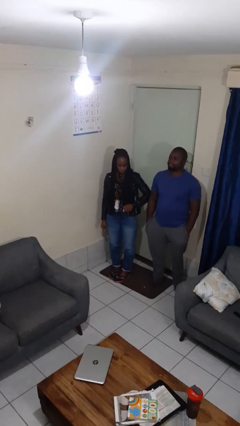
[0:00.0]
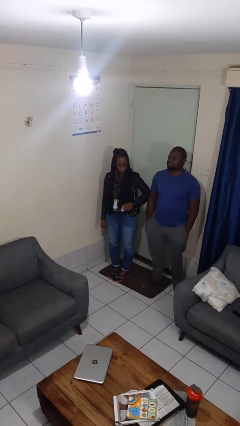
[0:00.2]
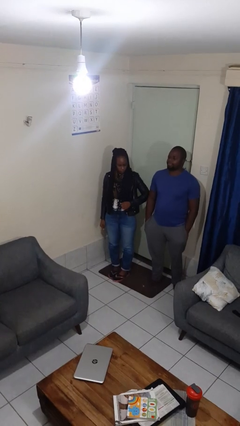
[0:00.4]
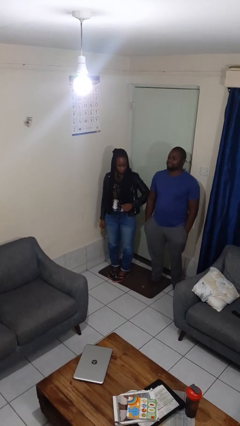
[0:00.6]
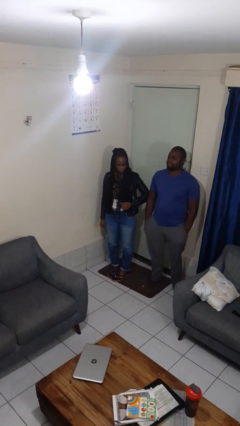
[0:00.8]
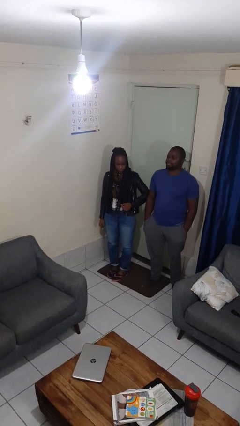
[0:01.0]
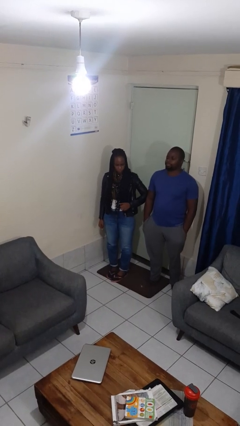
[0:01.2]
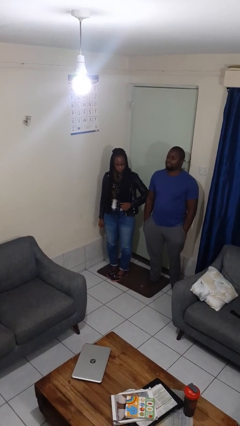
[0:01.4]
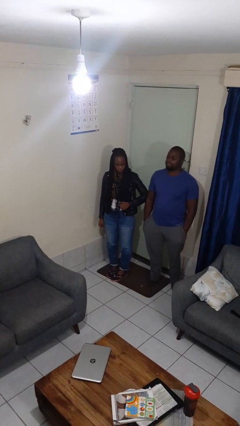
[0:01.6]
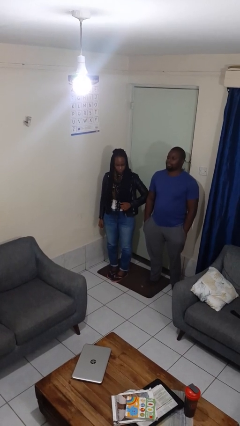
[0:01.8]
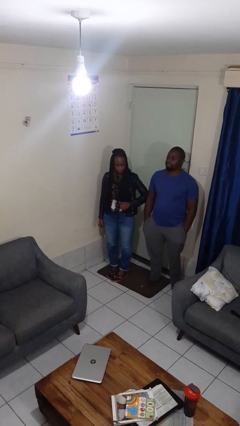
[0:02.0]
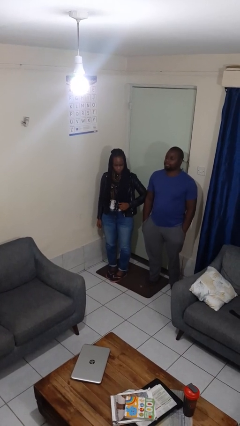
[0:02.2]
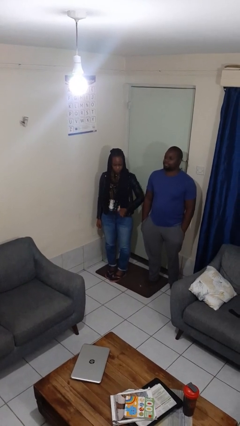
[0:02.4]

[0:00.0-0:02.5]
person nudges person with elbow

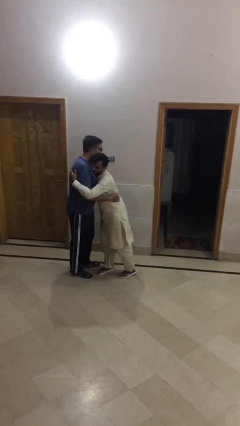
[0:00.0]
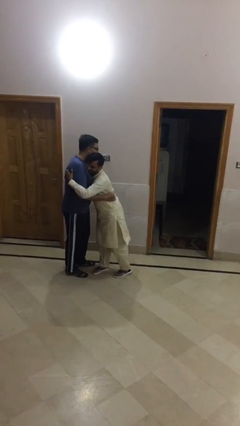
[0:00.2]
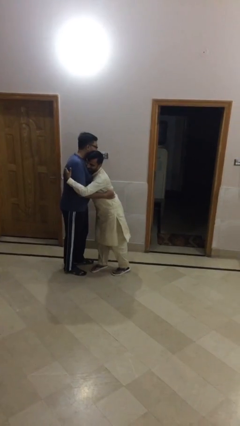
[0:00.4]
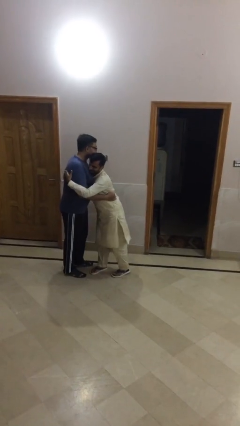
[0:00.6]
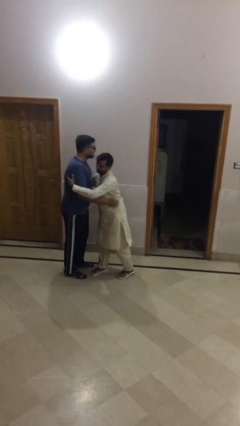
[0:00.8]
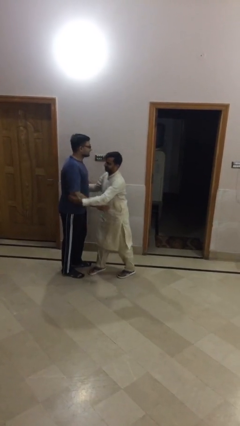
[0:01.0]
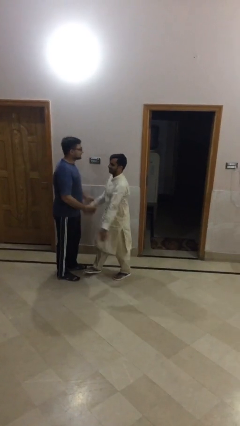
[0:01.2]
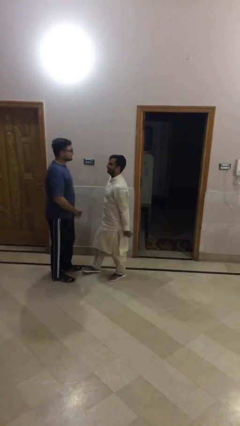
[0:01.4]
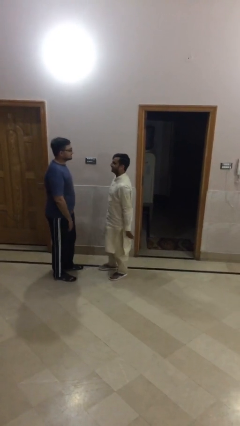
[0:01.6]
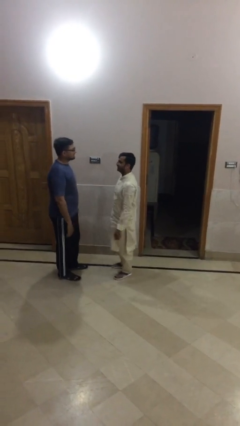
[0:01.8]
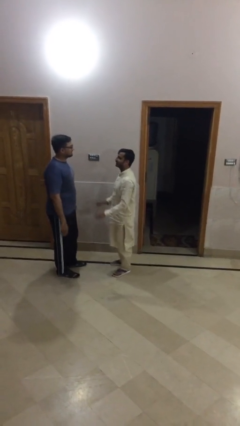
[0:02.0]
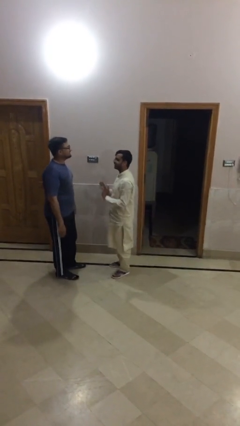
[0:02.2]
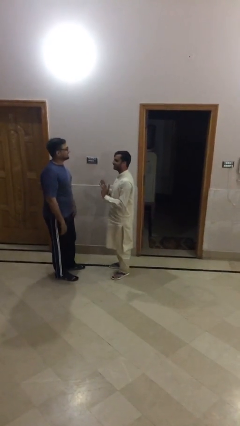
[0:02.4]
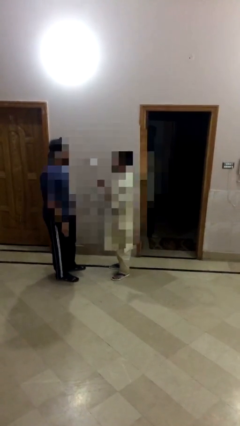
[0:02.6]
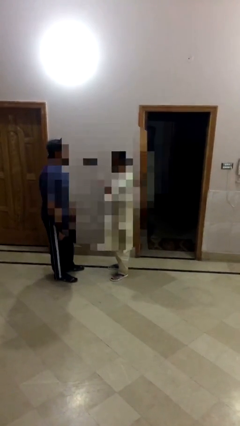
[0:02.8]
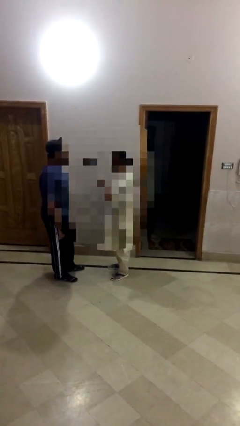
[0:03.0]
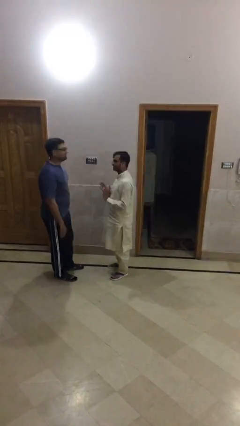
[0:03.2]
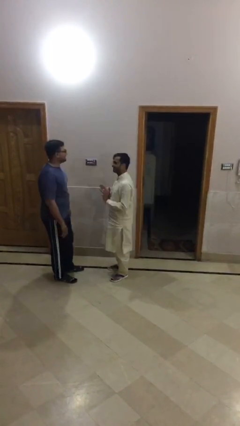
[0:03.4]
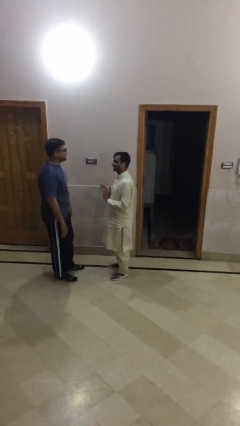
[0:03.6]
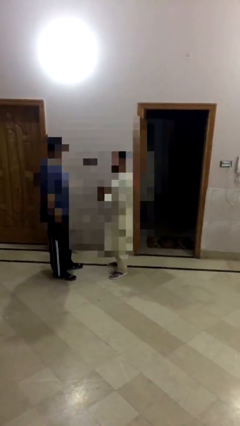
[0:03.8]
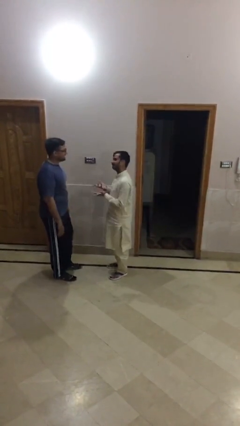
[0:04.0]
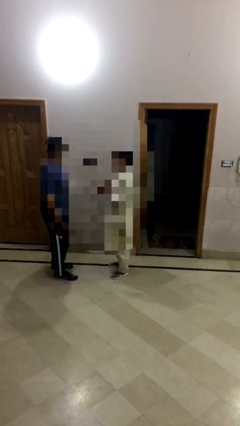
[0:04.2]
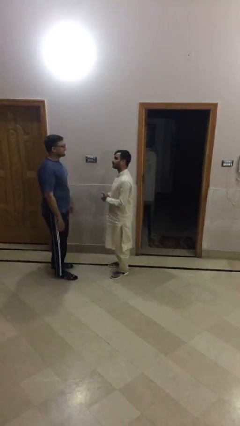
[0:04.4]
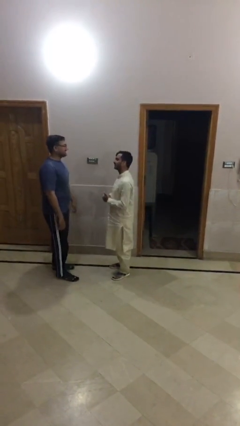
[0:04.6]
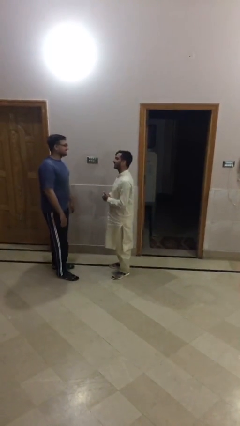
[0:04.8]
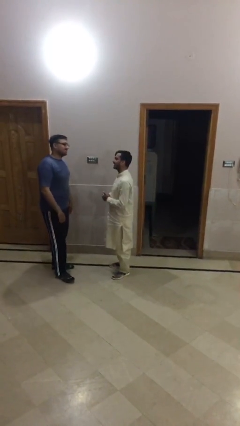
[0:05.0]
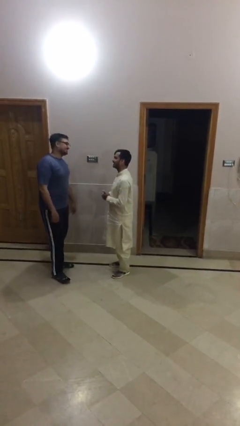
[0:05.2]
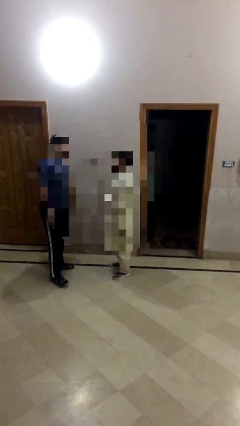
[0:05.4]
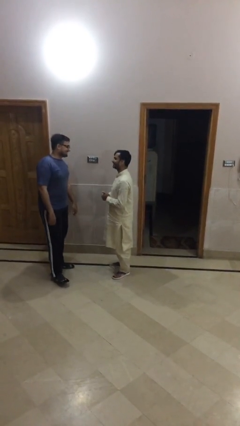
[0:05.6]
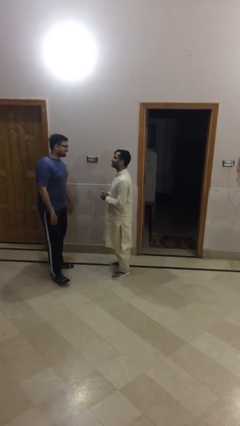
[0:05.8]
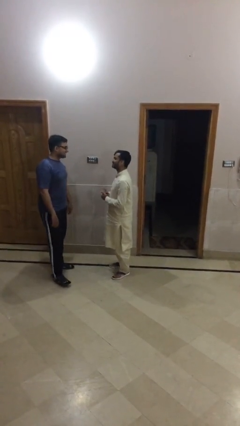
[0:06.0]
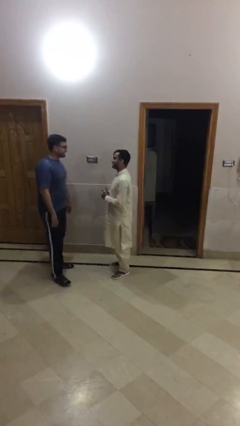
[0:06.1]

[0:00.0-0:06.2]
person talks to person

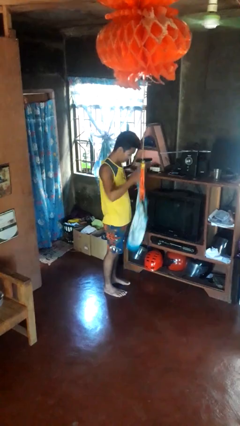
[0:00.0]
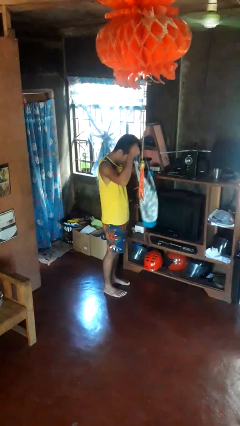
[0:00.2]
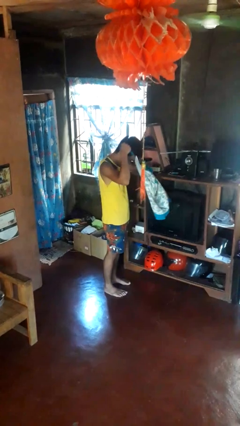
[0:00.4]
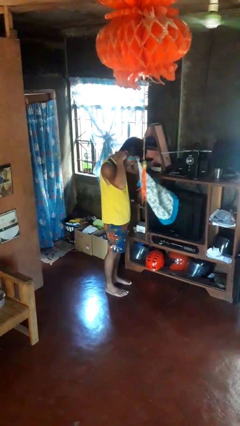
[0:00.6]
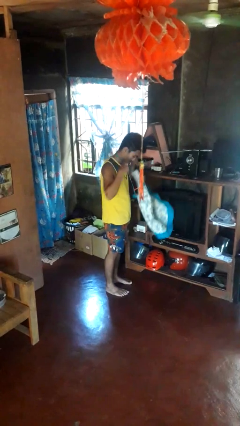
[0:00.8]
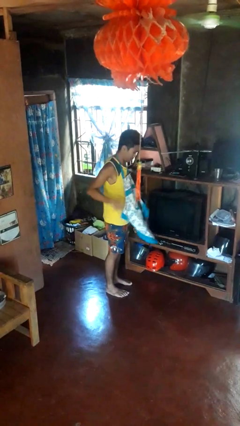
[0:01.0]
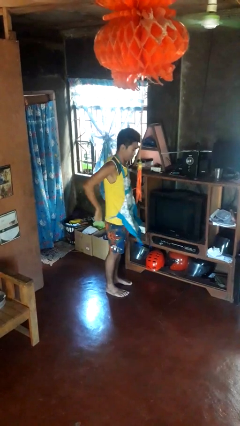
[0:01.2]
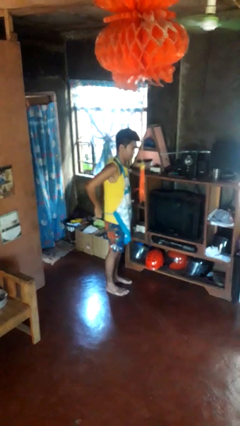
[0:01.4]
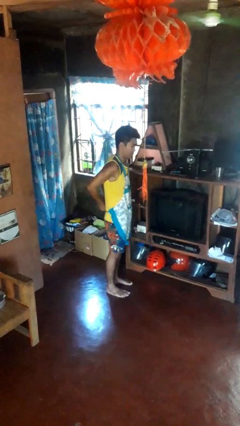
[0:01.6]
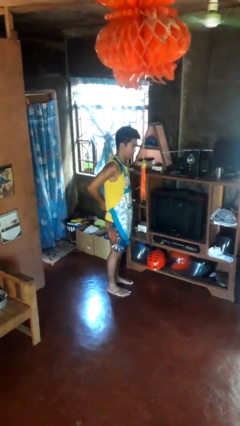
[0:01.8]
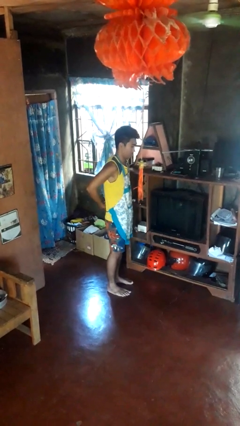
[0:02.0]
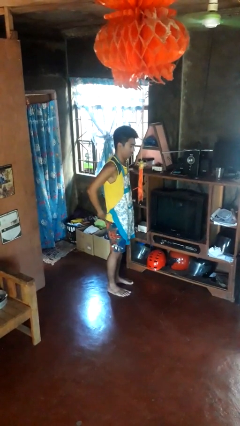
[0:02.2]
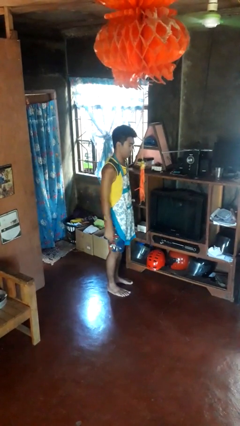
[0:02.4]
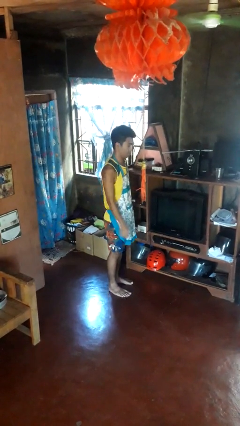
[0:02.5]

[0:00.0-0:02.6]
person puts on apron

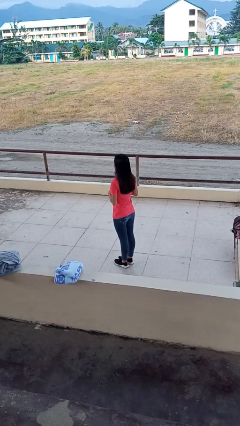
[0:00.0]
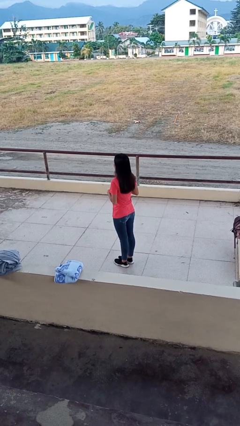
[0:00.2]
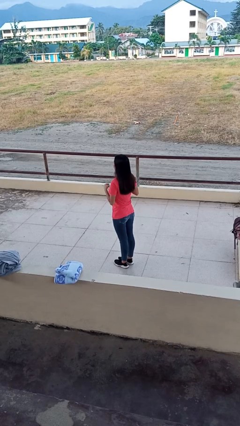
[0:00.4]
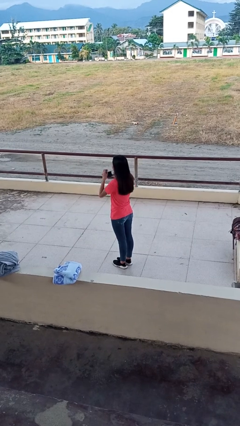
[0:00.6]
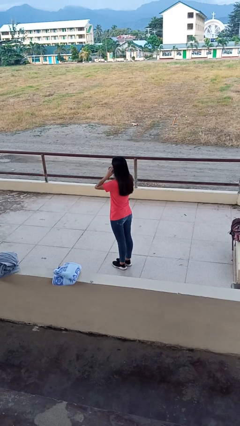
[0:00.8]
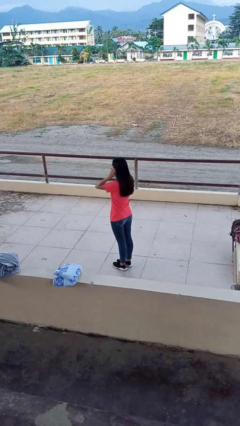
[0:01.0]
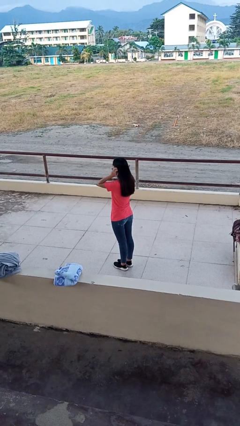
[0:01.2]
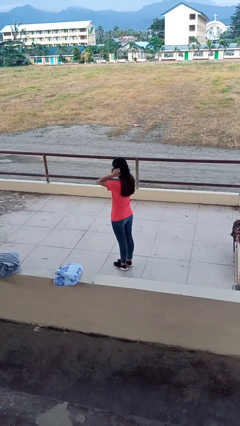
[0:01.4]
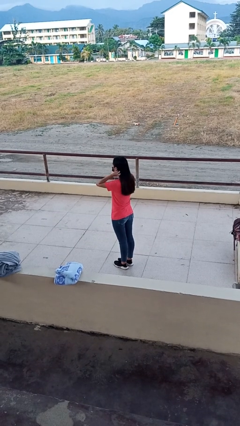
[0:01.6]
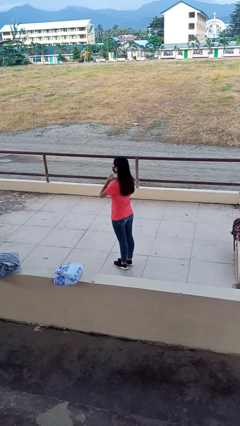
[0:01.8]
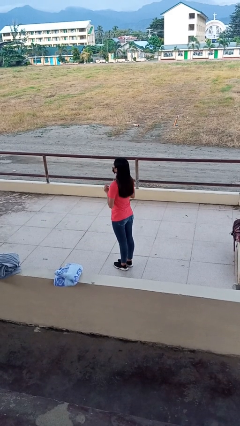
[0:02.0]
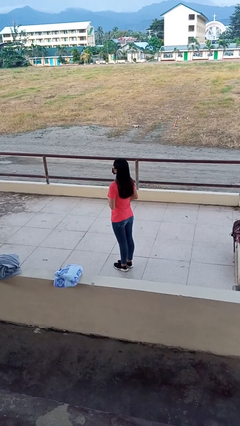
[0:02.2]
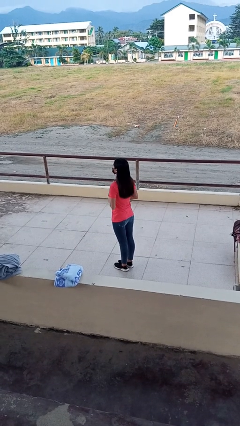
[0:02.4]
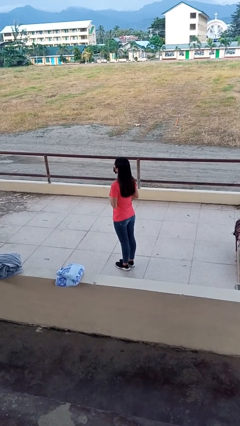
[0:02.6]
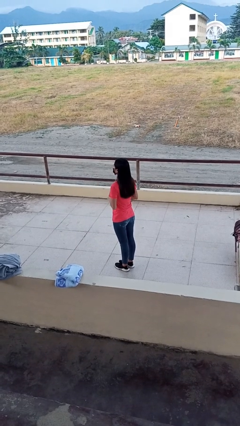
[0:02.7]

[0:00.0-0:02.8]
person puts on facemask

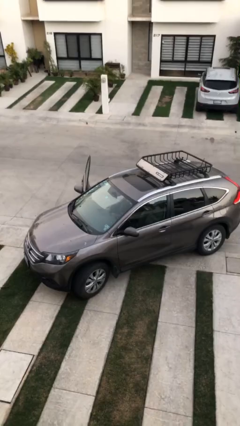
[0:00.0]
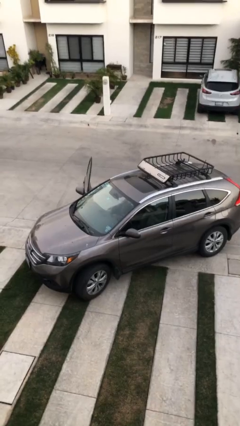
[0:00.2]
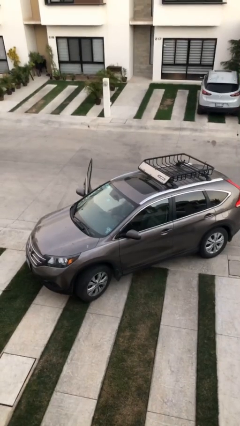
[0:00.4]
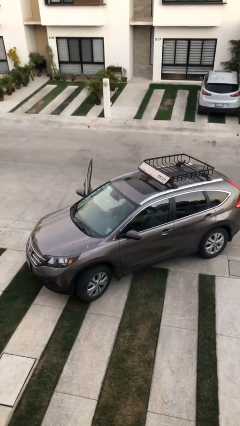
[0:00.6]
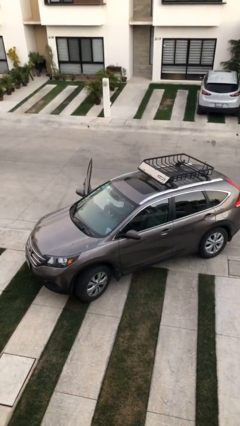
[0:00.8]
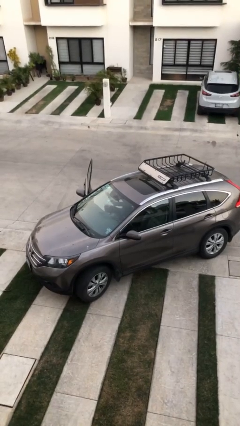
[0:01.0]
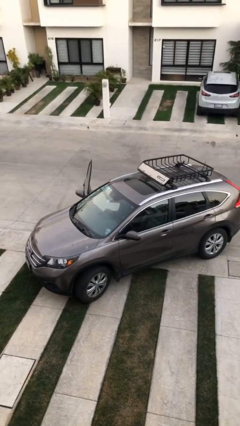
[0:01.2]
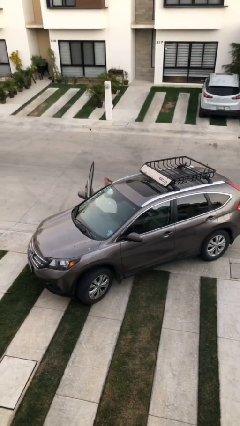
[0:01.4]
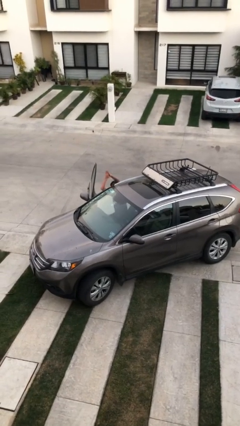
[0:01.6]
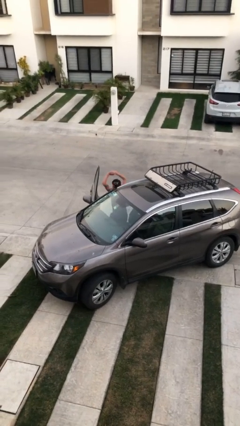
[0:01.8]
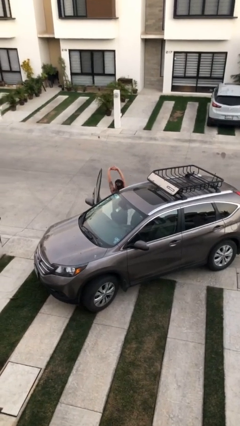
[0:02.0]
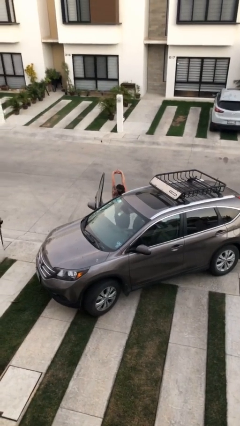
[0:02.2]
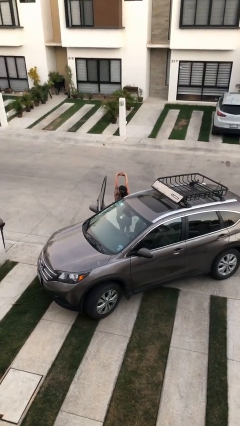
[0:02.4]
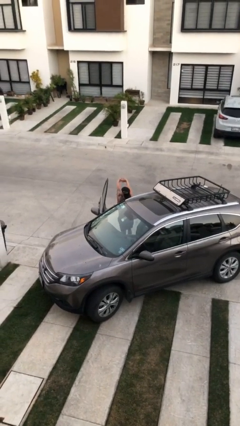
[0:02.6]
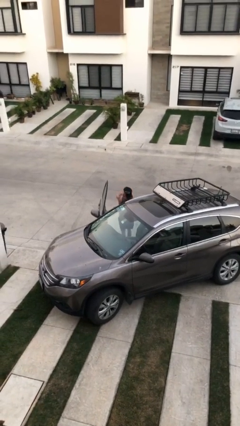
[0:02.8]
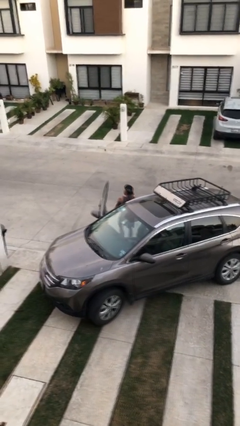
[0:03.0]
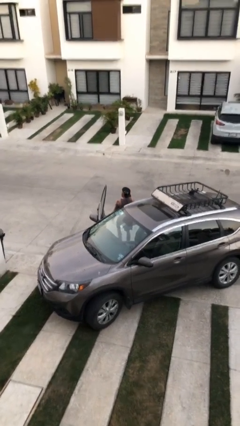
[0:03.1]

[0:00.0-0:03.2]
person exits car

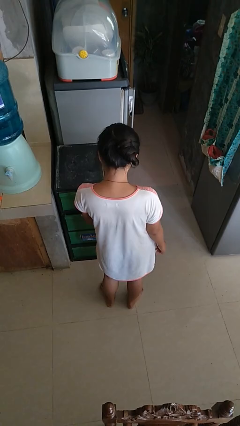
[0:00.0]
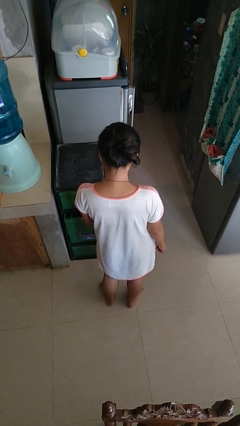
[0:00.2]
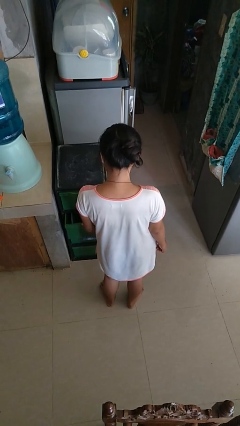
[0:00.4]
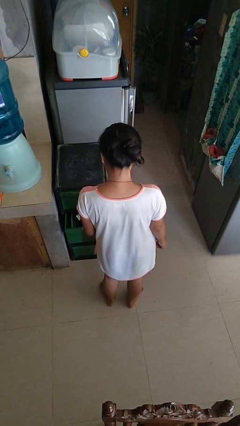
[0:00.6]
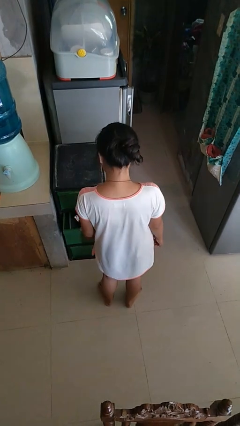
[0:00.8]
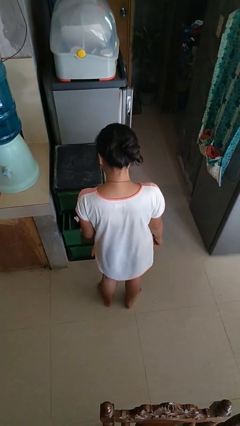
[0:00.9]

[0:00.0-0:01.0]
person opens kitchen drawer
